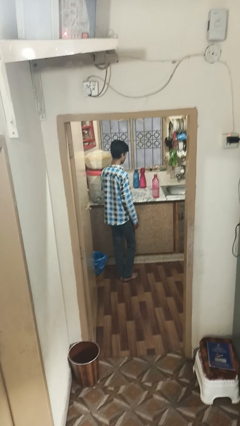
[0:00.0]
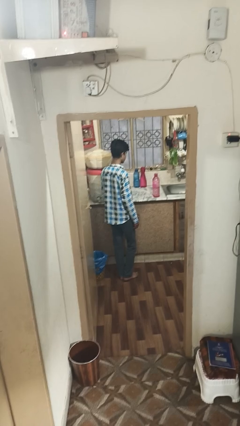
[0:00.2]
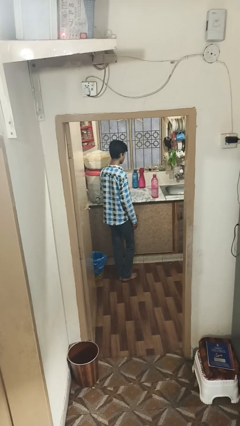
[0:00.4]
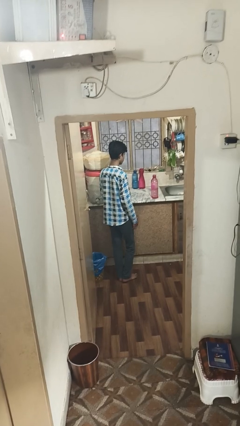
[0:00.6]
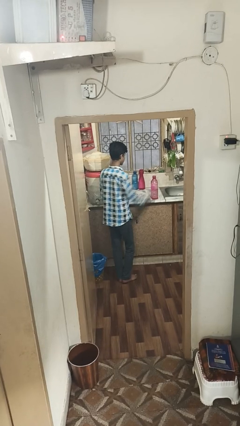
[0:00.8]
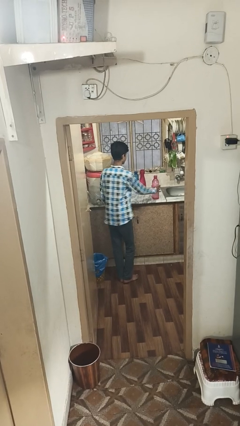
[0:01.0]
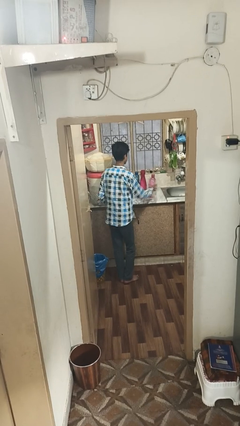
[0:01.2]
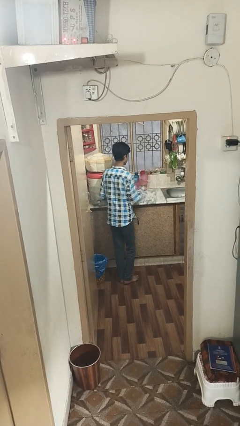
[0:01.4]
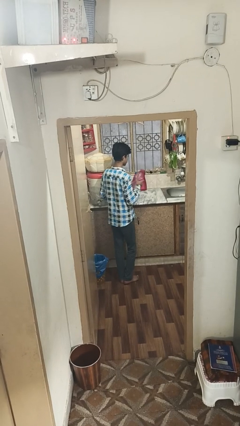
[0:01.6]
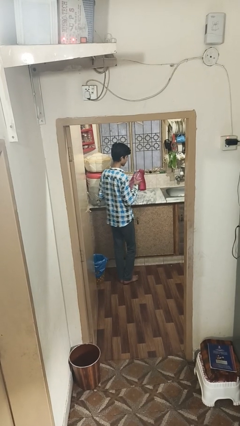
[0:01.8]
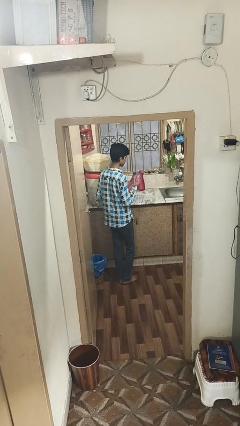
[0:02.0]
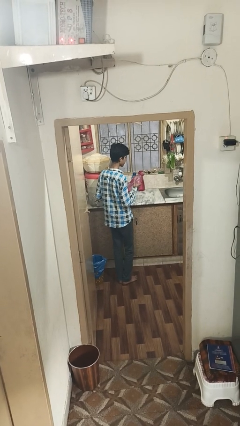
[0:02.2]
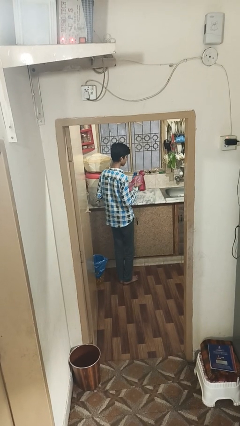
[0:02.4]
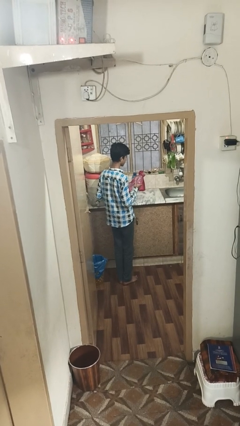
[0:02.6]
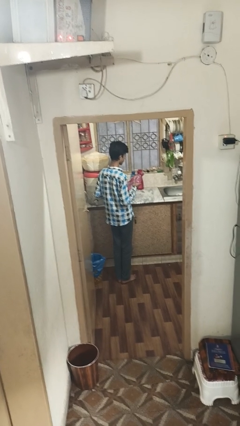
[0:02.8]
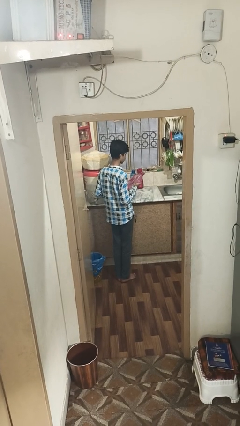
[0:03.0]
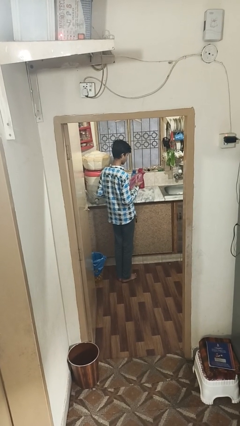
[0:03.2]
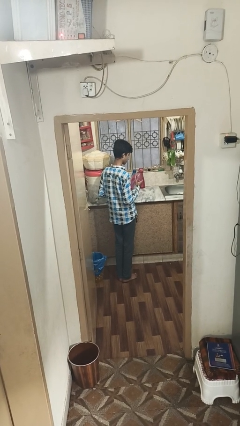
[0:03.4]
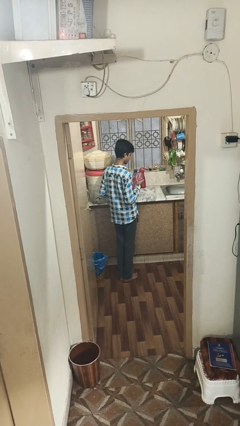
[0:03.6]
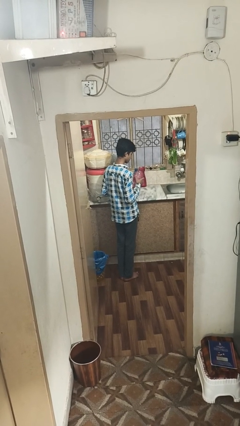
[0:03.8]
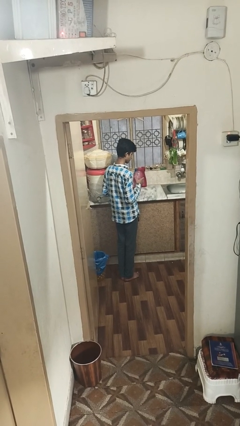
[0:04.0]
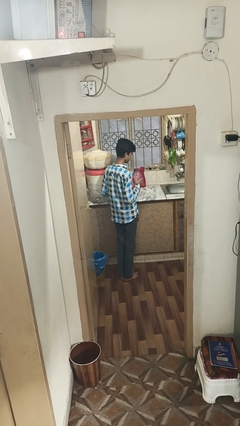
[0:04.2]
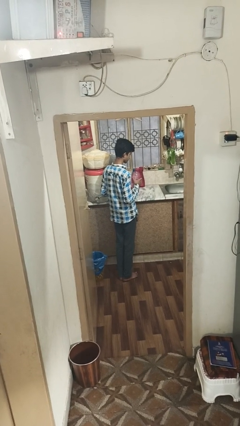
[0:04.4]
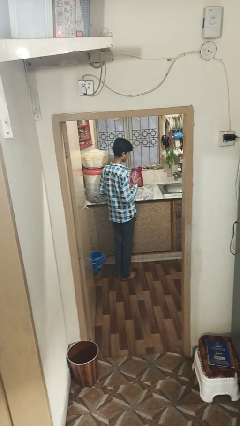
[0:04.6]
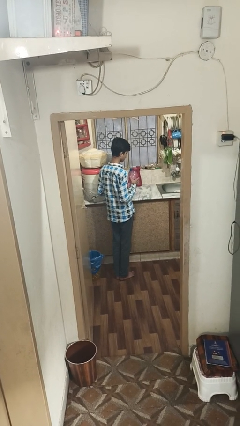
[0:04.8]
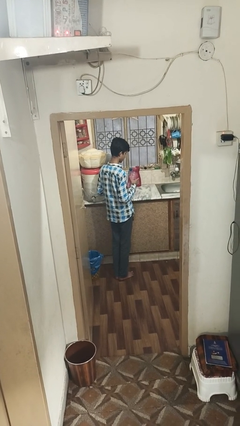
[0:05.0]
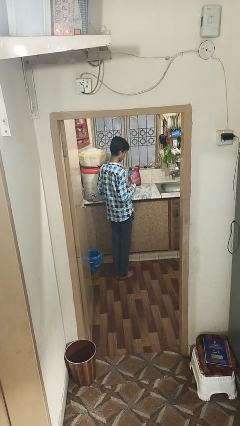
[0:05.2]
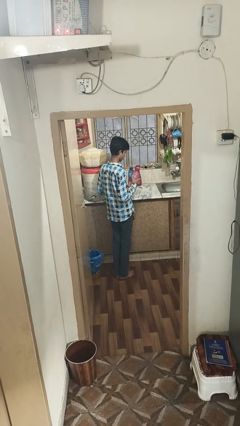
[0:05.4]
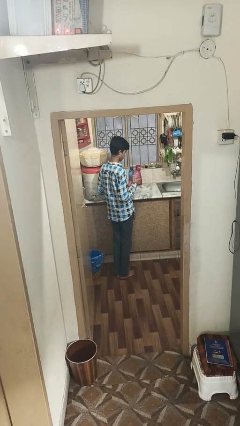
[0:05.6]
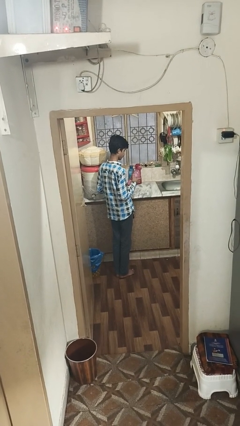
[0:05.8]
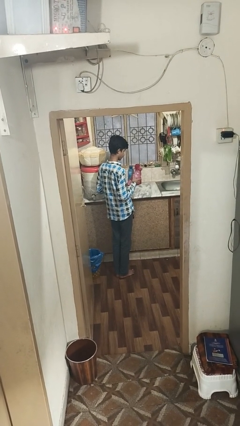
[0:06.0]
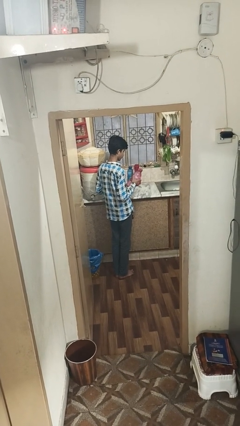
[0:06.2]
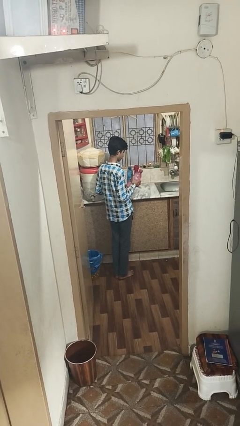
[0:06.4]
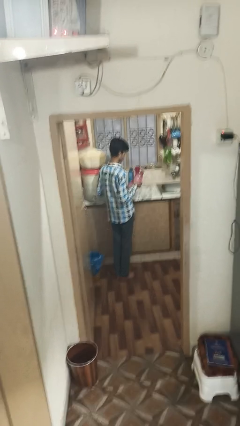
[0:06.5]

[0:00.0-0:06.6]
person picks up object from countertop

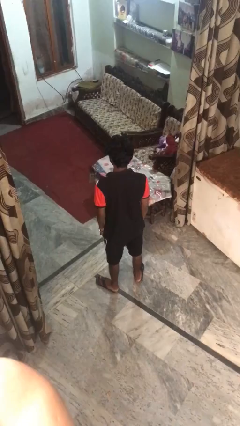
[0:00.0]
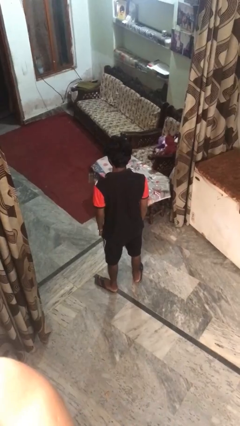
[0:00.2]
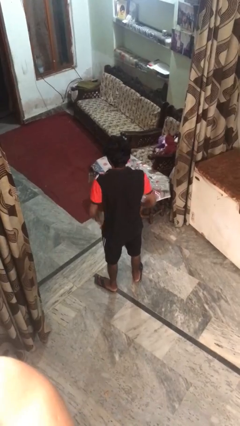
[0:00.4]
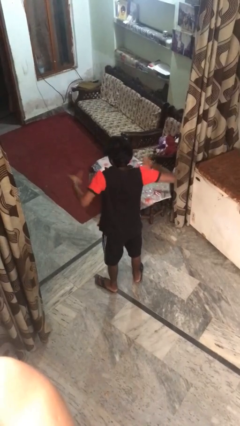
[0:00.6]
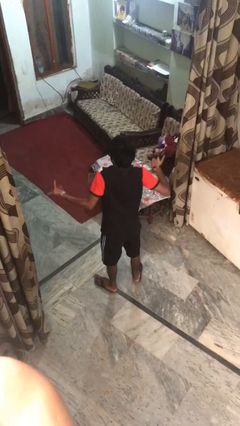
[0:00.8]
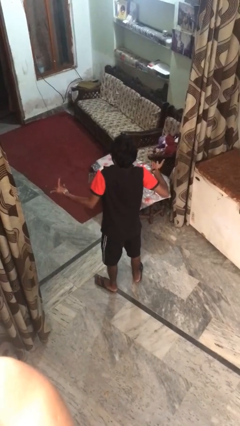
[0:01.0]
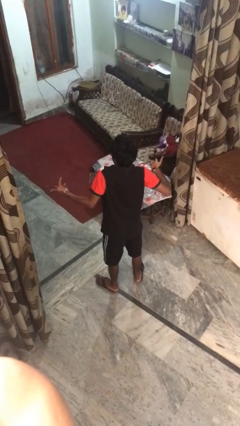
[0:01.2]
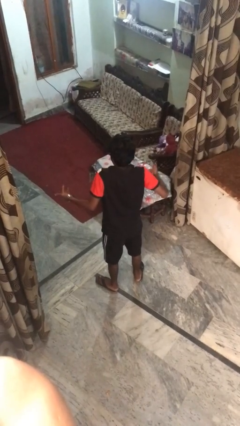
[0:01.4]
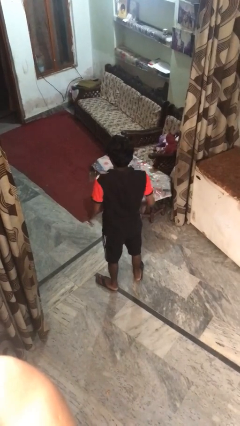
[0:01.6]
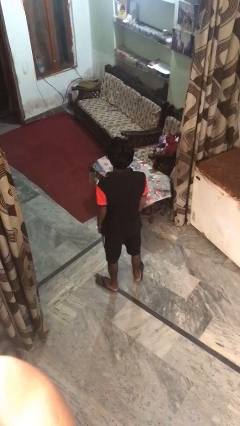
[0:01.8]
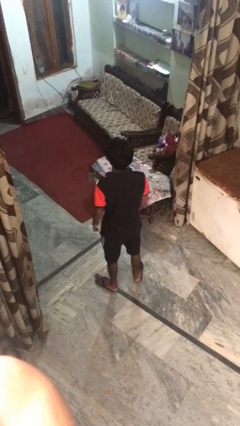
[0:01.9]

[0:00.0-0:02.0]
person shrugs

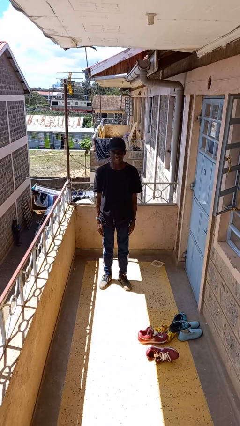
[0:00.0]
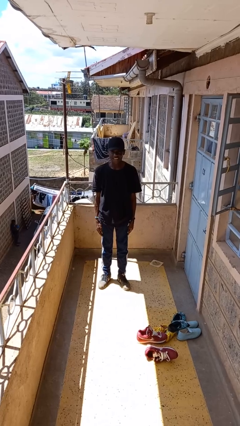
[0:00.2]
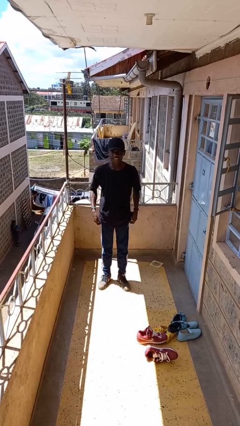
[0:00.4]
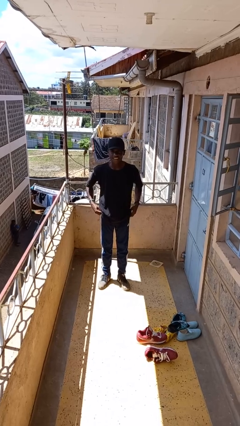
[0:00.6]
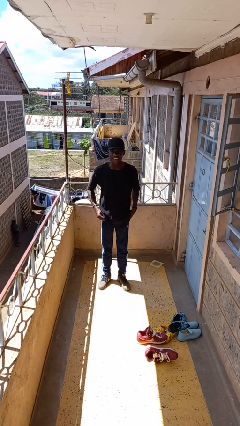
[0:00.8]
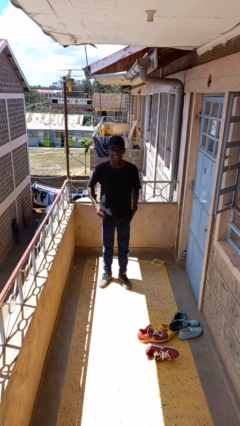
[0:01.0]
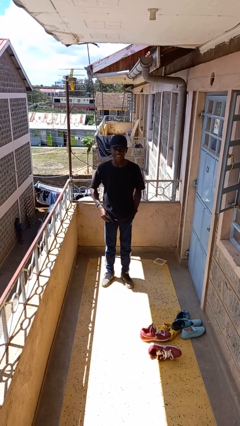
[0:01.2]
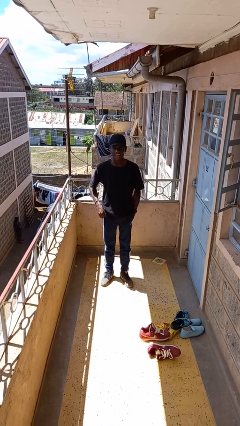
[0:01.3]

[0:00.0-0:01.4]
person puts hands in back pockets

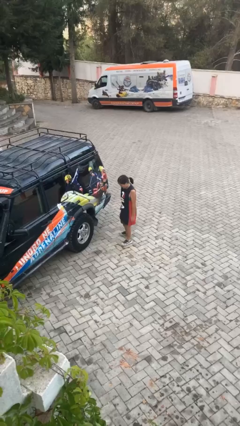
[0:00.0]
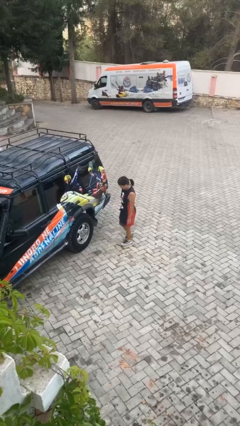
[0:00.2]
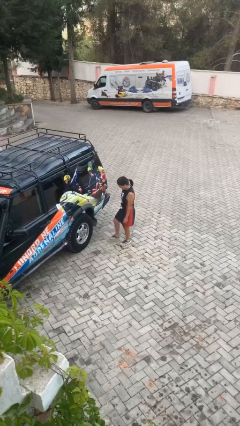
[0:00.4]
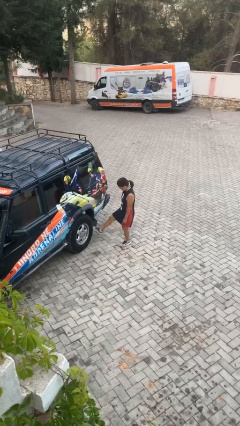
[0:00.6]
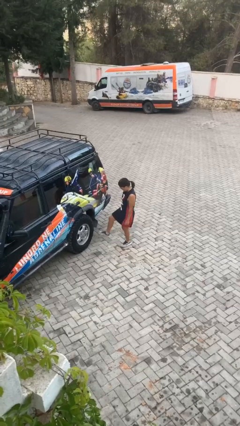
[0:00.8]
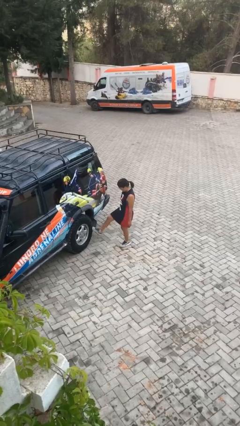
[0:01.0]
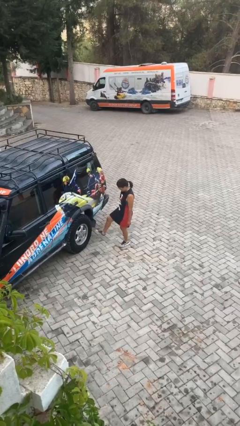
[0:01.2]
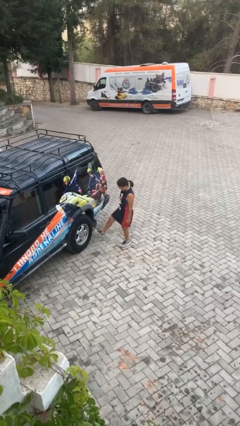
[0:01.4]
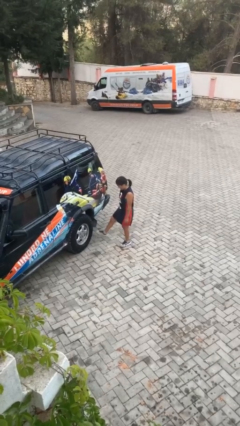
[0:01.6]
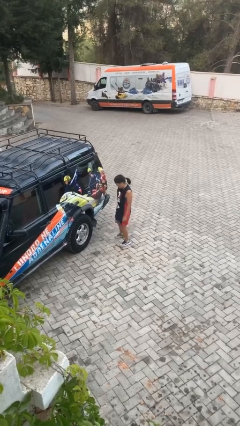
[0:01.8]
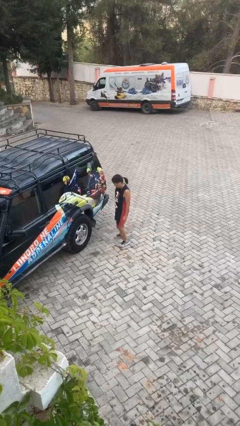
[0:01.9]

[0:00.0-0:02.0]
person kicks car tires

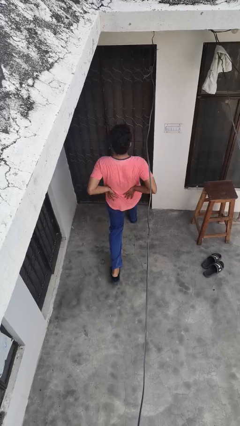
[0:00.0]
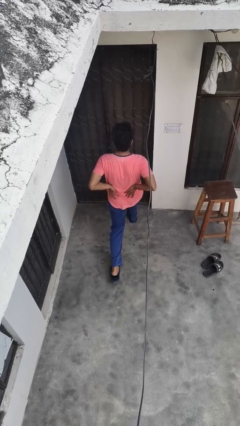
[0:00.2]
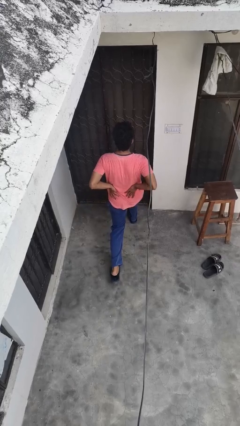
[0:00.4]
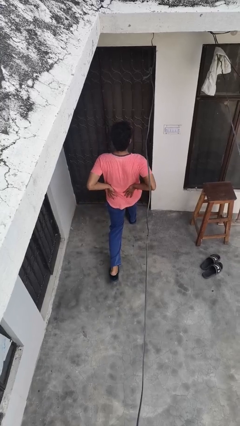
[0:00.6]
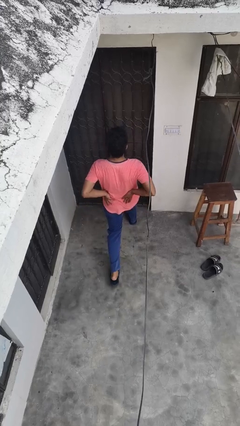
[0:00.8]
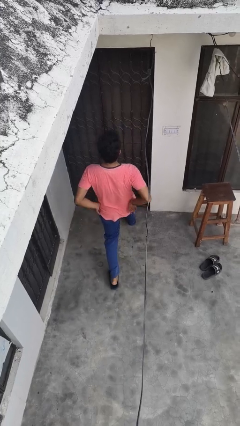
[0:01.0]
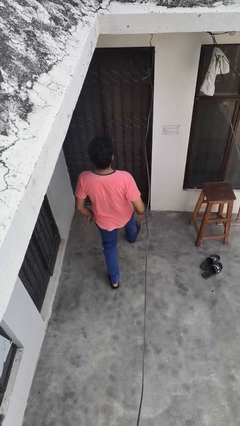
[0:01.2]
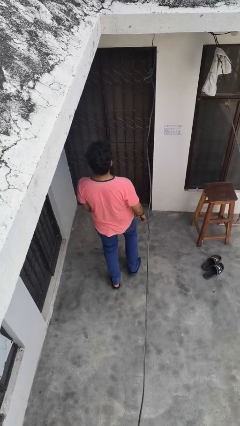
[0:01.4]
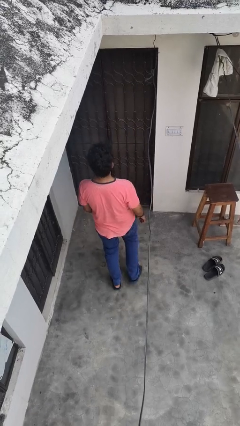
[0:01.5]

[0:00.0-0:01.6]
person exercises with lunges

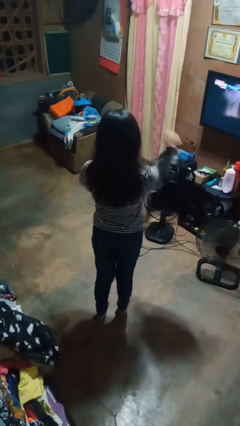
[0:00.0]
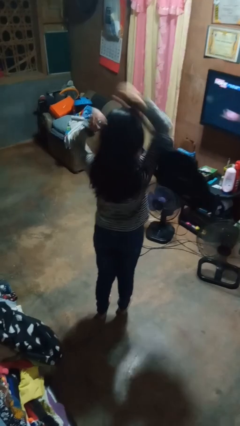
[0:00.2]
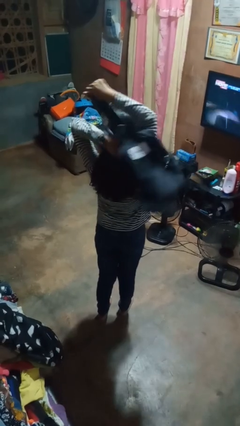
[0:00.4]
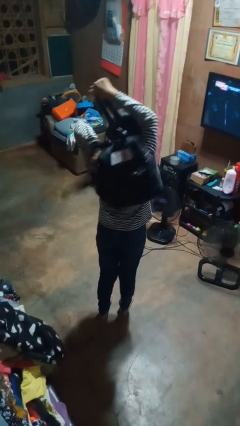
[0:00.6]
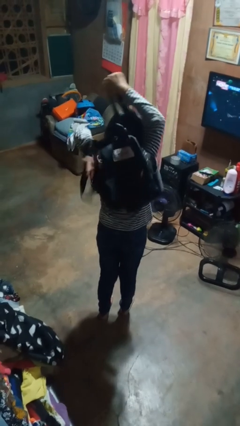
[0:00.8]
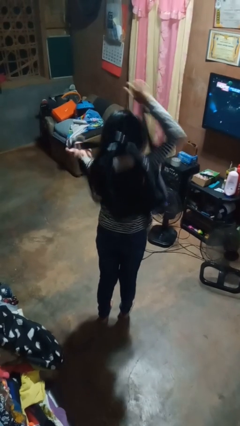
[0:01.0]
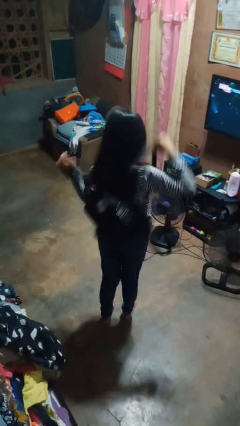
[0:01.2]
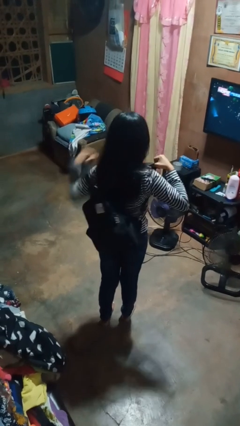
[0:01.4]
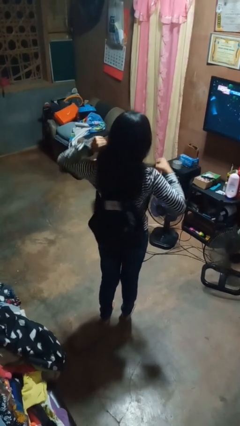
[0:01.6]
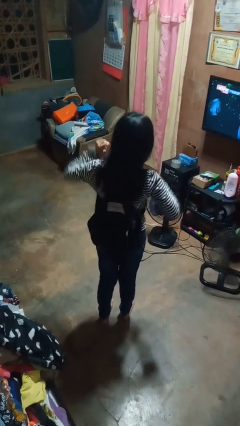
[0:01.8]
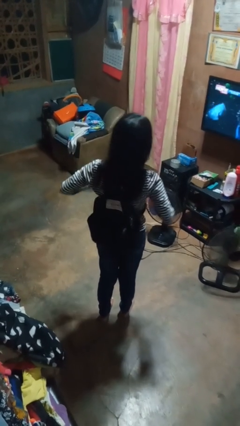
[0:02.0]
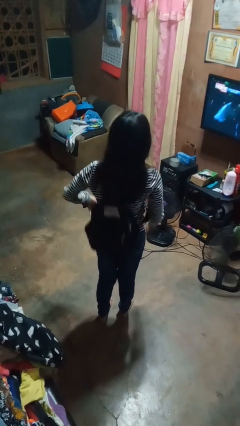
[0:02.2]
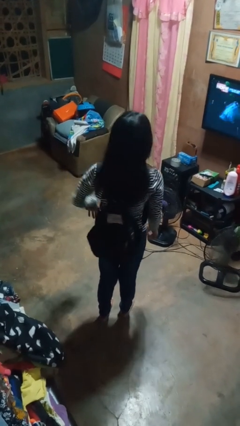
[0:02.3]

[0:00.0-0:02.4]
person puts on backpack

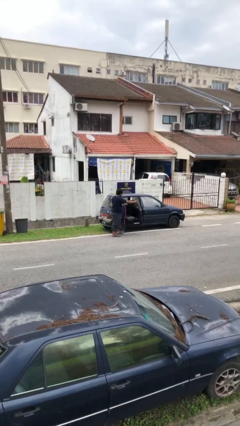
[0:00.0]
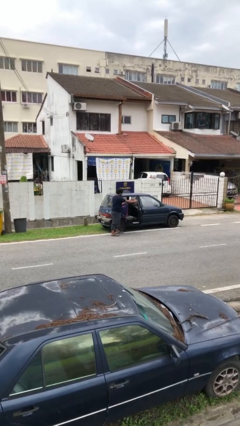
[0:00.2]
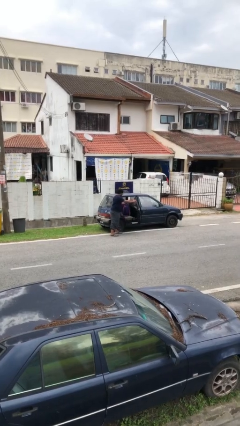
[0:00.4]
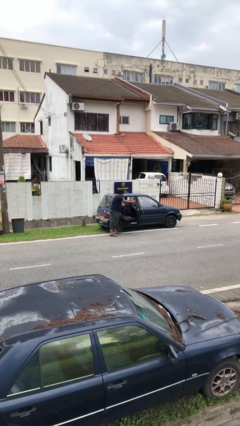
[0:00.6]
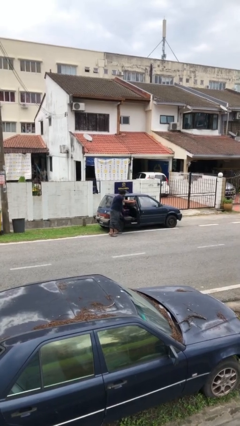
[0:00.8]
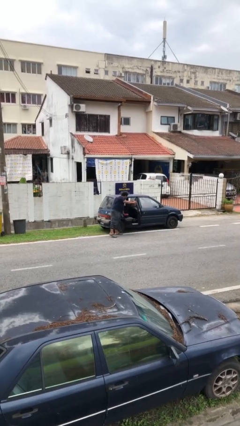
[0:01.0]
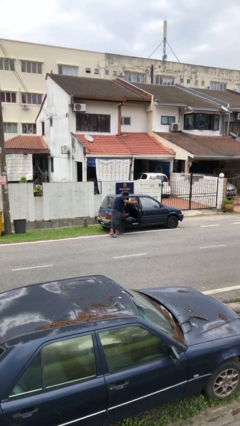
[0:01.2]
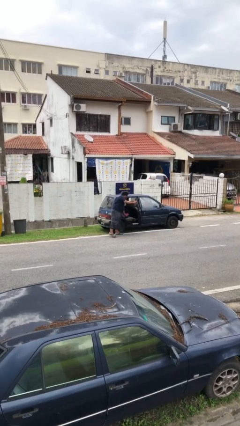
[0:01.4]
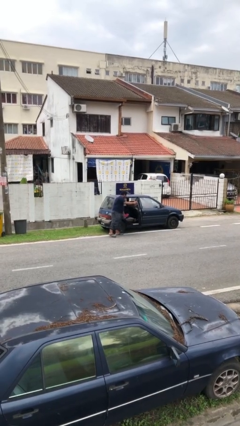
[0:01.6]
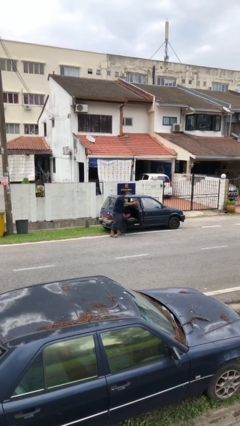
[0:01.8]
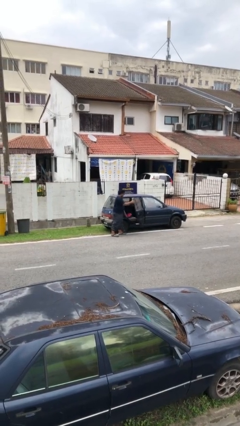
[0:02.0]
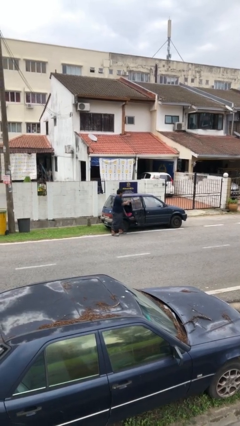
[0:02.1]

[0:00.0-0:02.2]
person loads car
